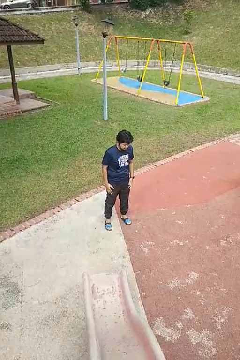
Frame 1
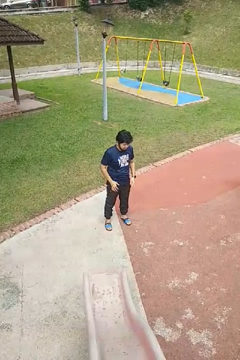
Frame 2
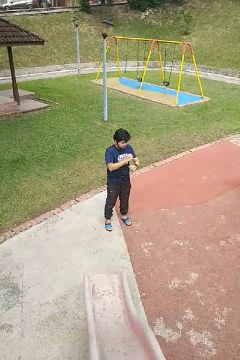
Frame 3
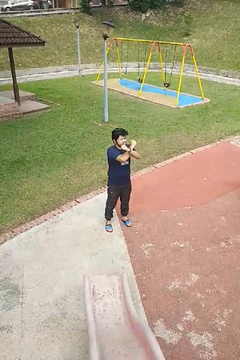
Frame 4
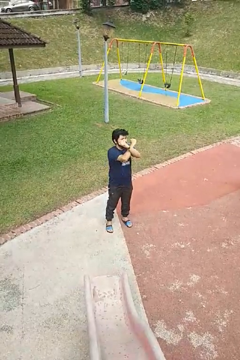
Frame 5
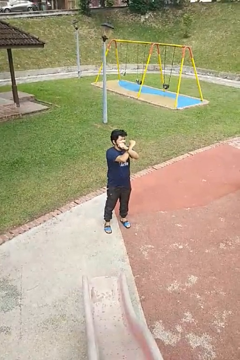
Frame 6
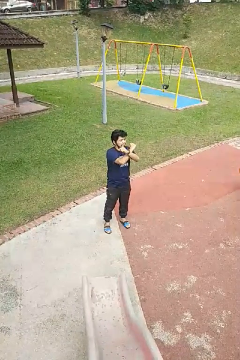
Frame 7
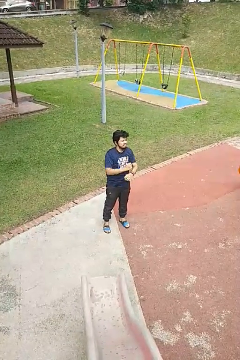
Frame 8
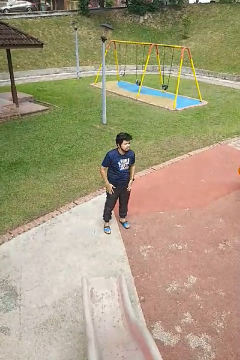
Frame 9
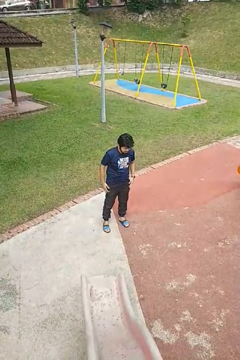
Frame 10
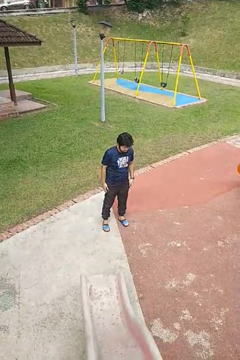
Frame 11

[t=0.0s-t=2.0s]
person gestures arms x

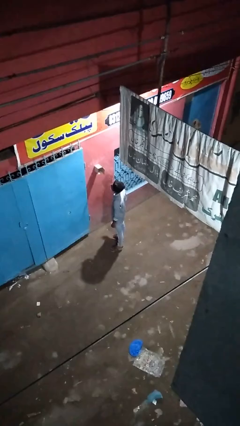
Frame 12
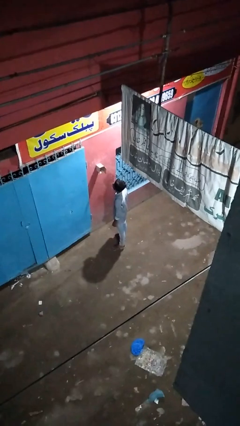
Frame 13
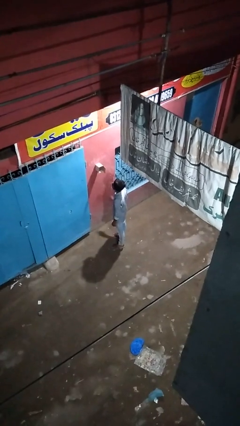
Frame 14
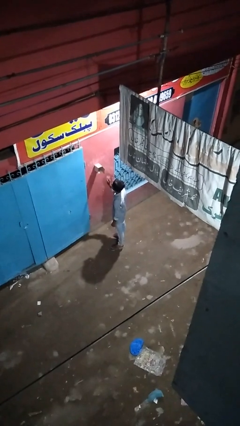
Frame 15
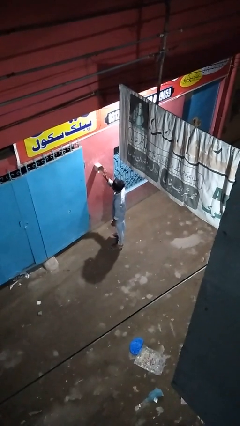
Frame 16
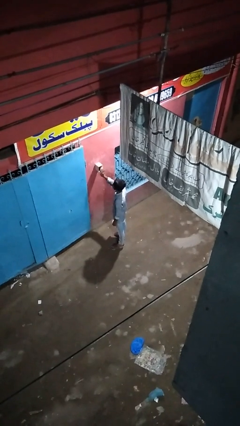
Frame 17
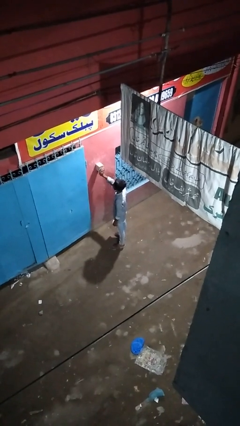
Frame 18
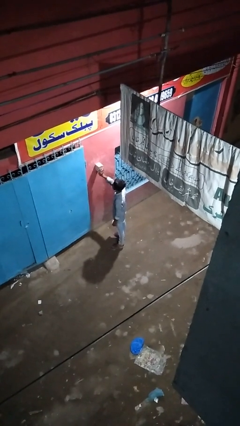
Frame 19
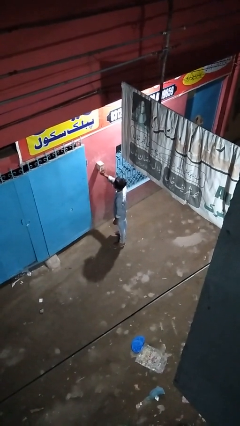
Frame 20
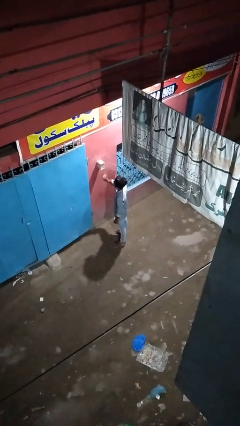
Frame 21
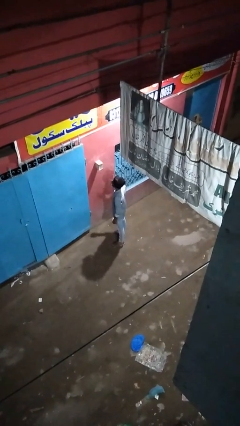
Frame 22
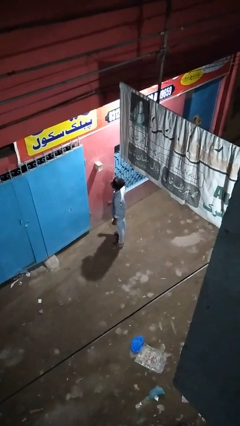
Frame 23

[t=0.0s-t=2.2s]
person closes mailbox

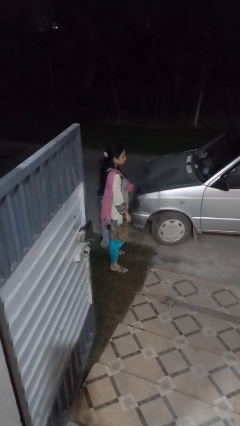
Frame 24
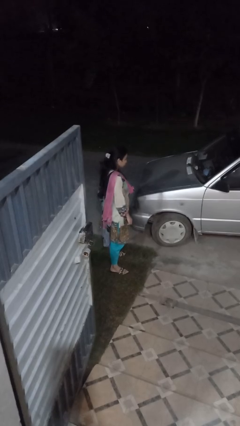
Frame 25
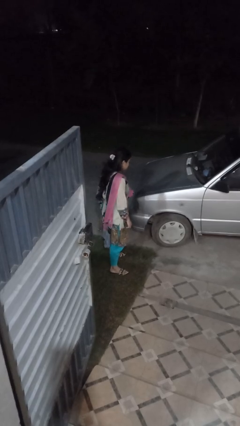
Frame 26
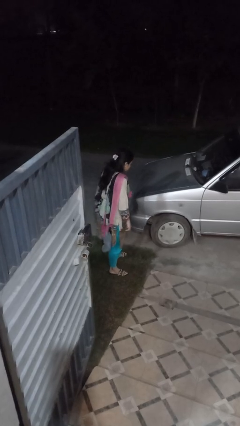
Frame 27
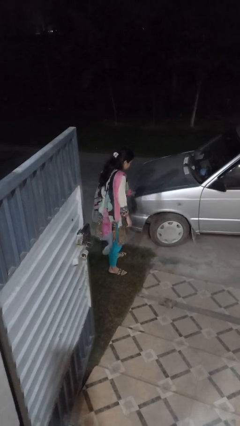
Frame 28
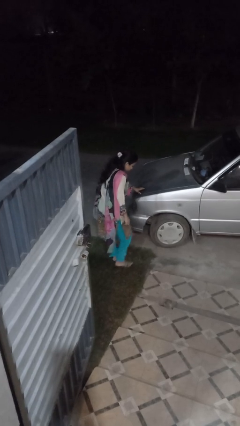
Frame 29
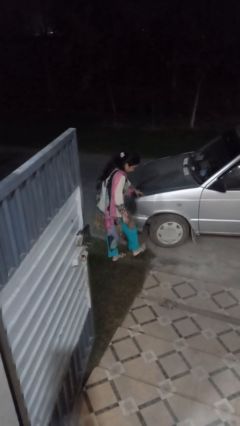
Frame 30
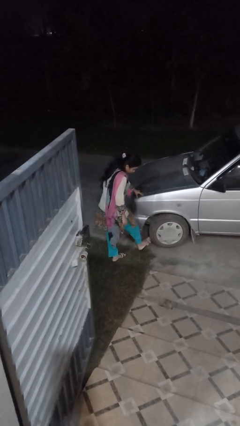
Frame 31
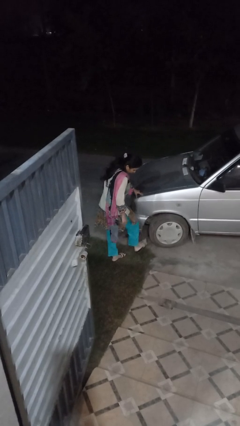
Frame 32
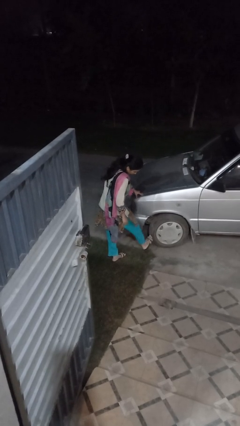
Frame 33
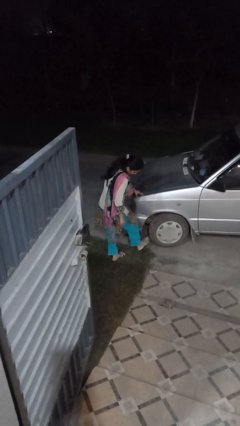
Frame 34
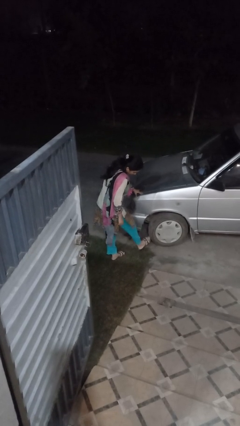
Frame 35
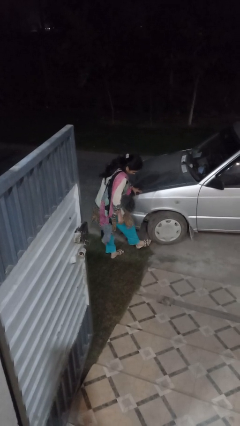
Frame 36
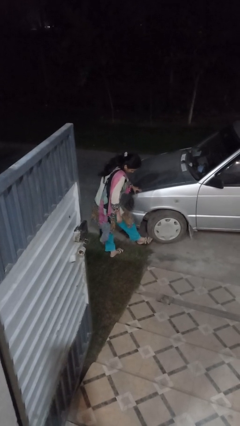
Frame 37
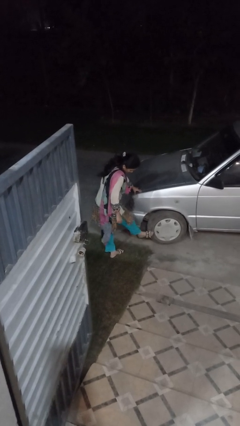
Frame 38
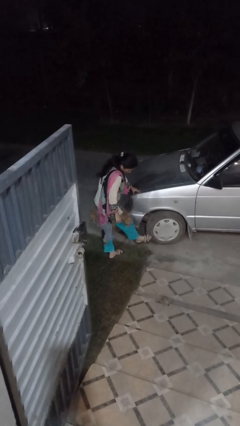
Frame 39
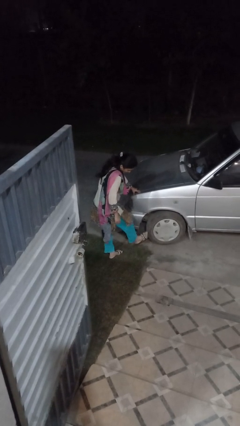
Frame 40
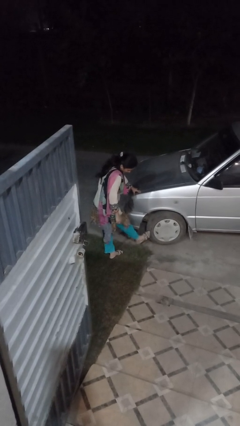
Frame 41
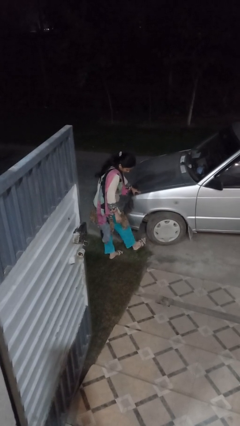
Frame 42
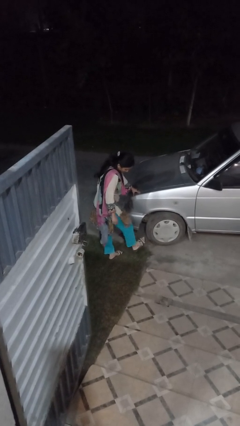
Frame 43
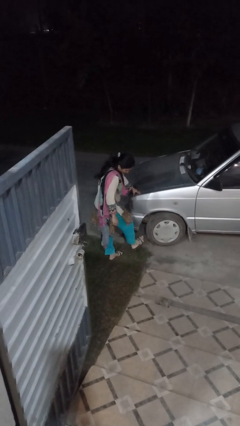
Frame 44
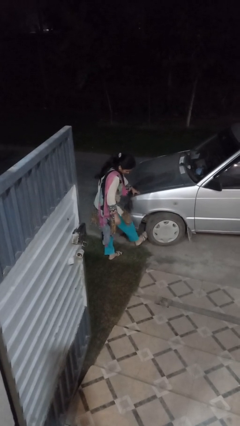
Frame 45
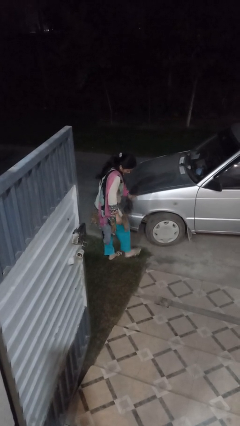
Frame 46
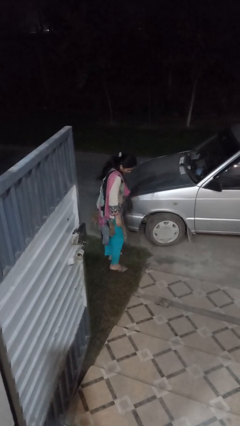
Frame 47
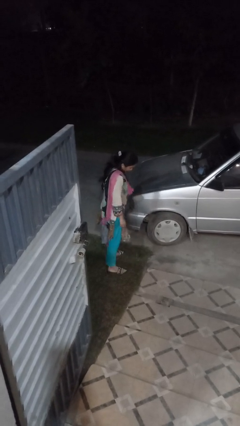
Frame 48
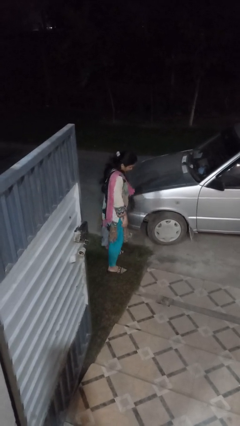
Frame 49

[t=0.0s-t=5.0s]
person kicks car tires

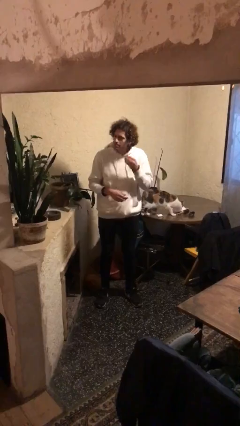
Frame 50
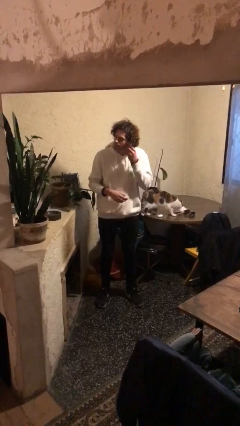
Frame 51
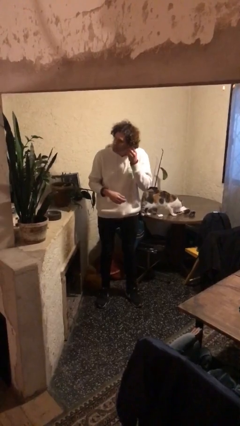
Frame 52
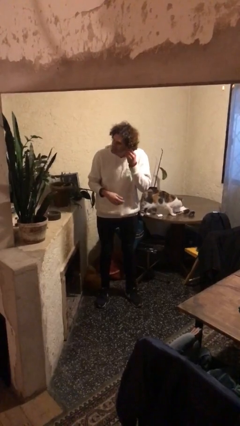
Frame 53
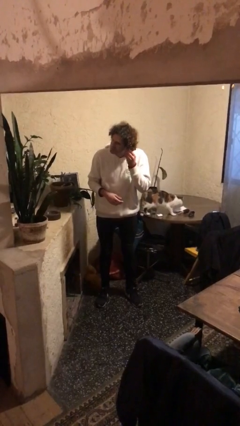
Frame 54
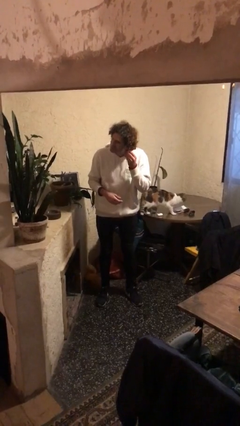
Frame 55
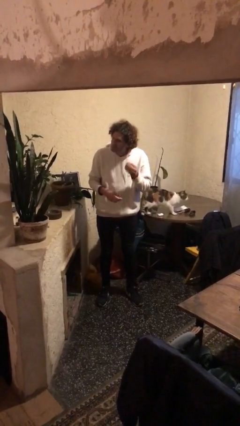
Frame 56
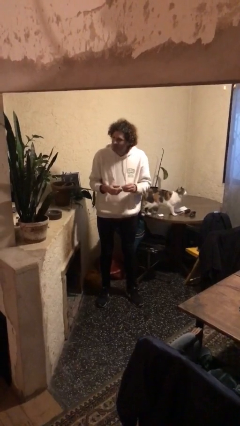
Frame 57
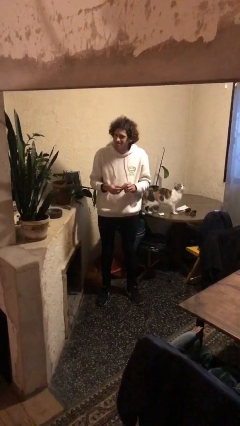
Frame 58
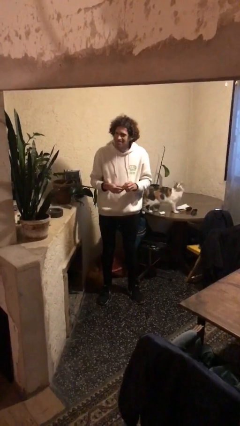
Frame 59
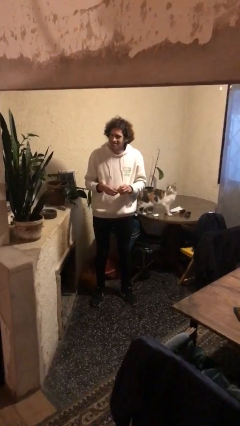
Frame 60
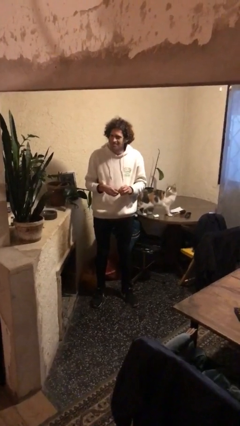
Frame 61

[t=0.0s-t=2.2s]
person takes off earrings

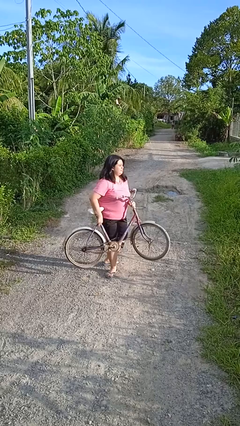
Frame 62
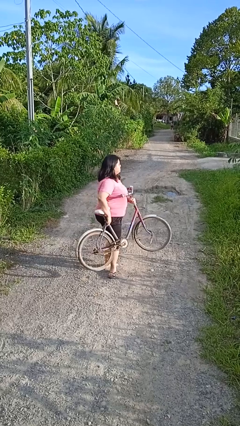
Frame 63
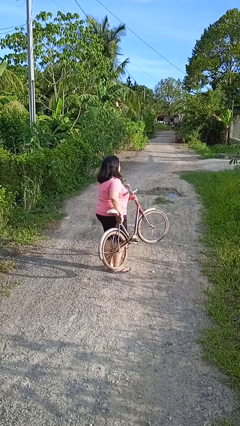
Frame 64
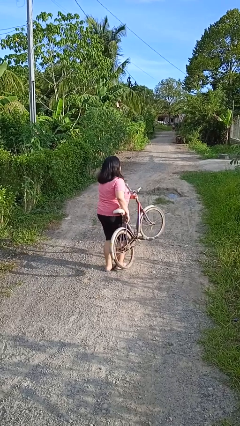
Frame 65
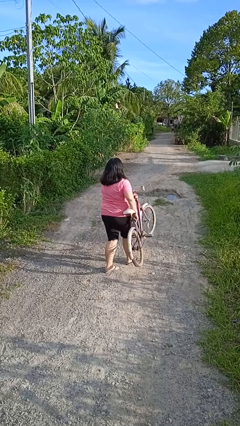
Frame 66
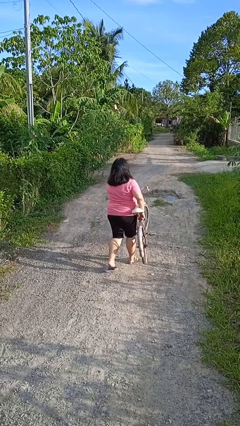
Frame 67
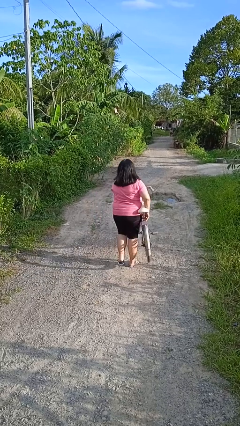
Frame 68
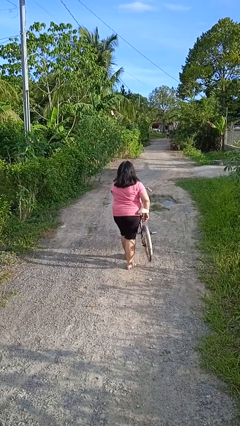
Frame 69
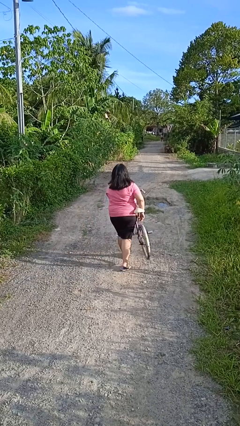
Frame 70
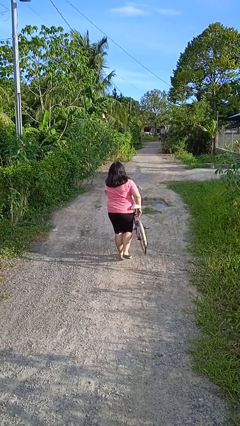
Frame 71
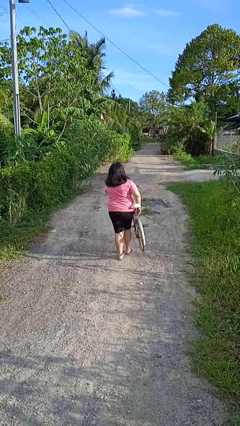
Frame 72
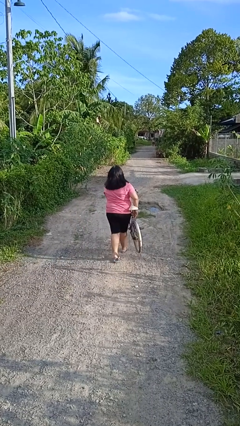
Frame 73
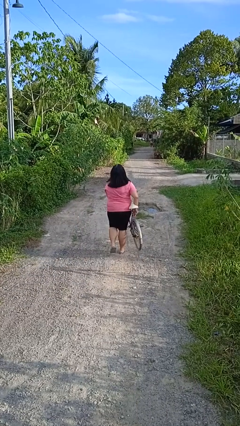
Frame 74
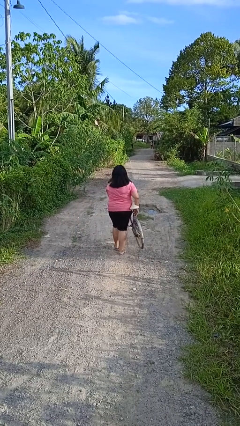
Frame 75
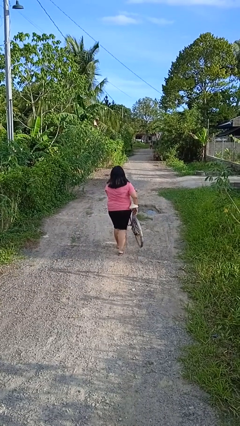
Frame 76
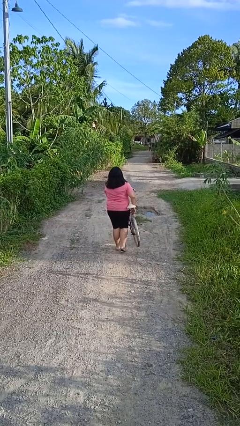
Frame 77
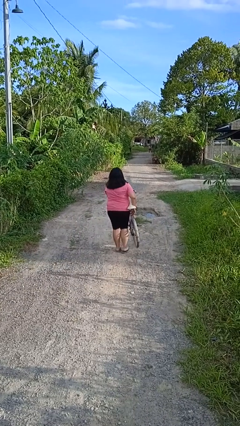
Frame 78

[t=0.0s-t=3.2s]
person carries bicycle

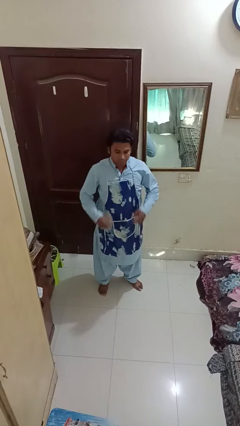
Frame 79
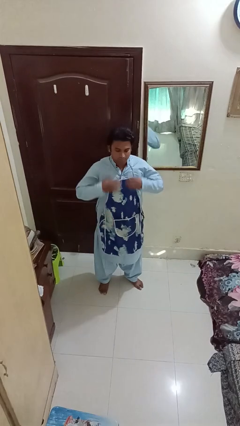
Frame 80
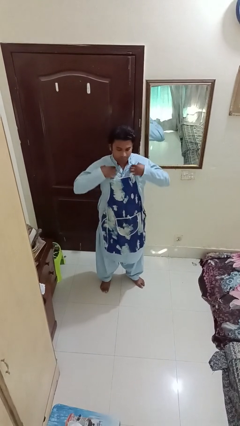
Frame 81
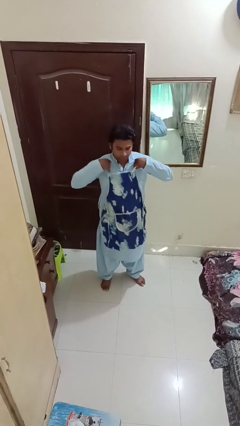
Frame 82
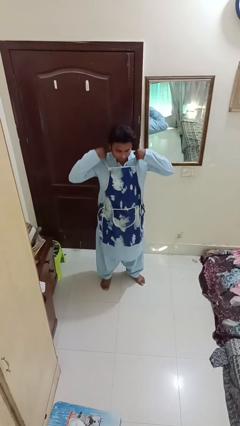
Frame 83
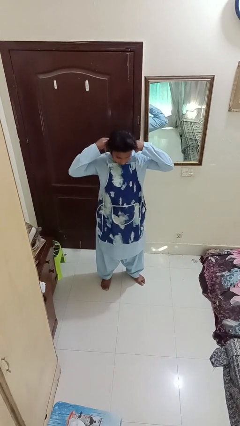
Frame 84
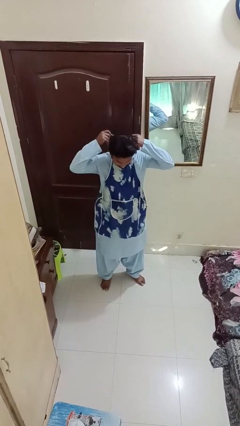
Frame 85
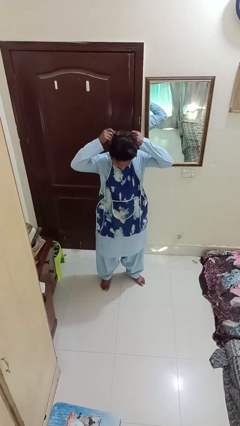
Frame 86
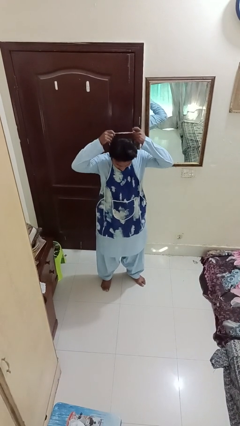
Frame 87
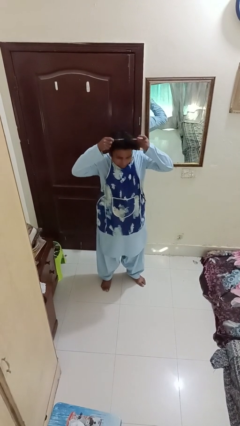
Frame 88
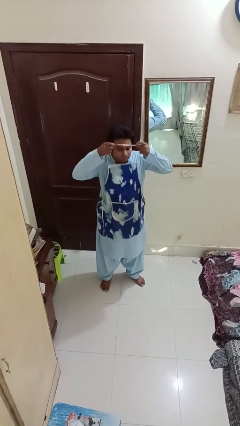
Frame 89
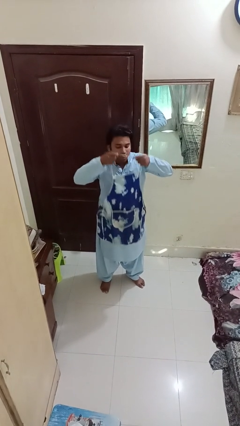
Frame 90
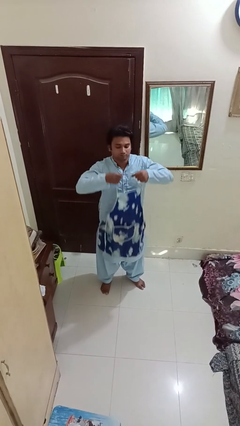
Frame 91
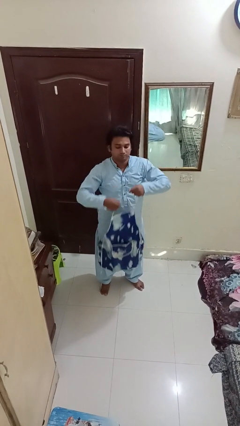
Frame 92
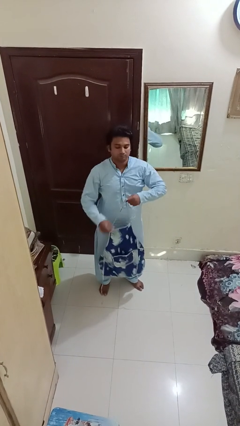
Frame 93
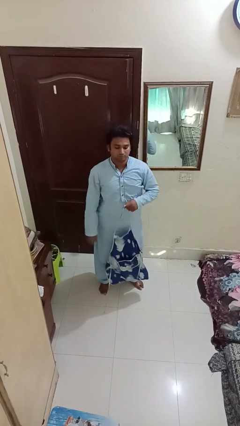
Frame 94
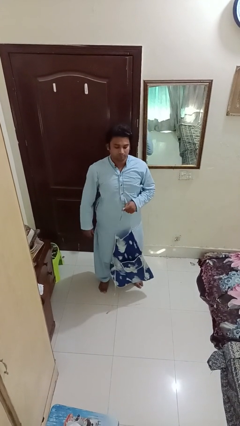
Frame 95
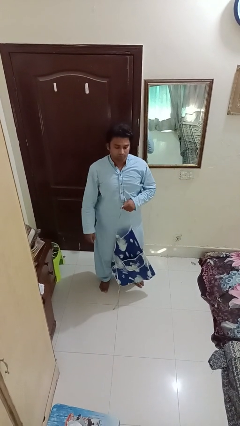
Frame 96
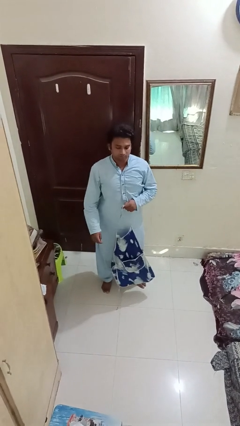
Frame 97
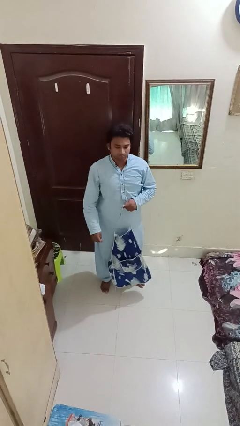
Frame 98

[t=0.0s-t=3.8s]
person takes off apron
